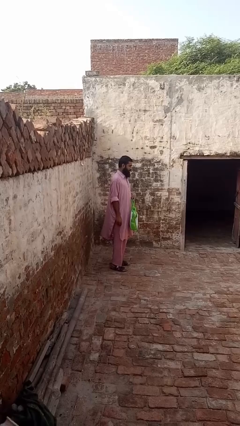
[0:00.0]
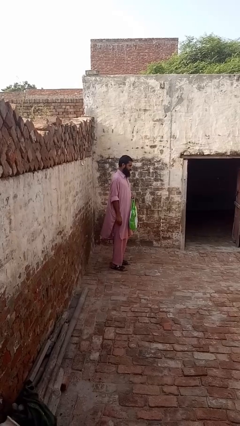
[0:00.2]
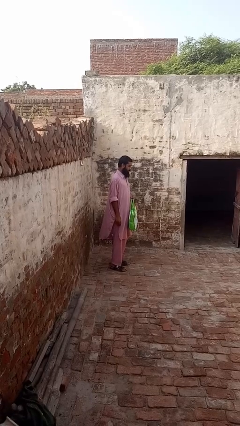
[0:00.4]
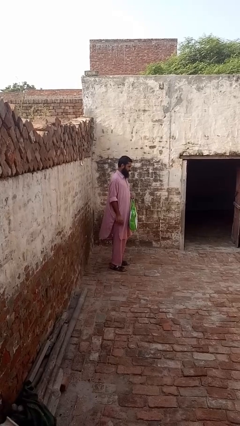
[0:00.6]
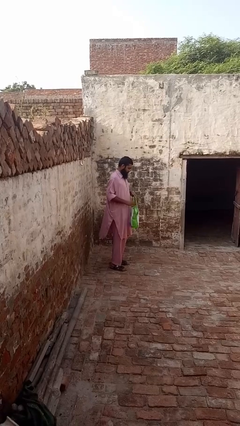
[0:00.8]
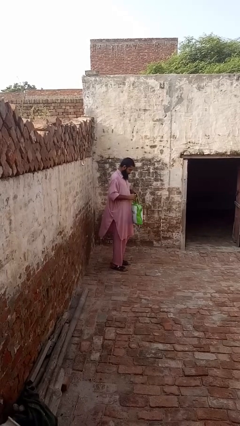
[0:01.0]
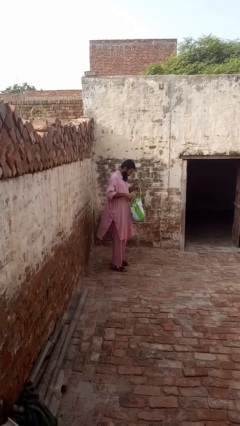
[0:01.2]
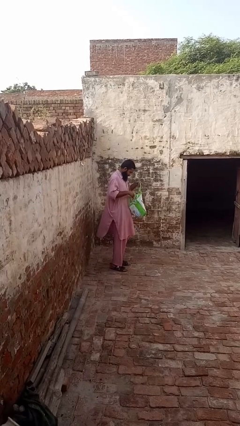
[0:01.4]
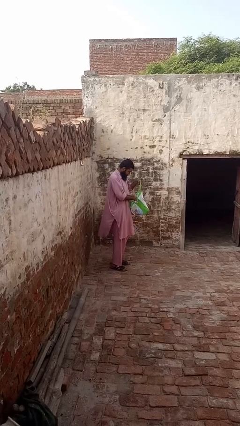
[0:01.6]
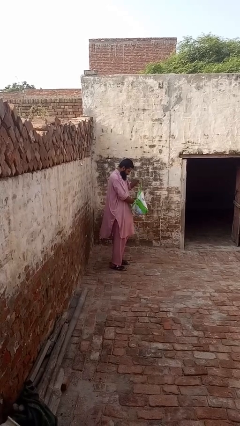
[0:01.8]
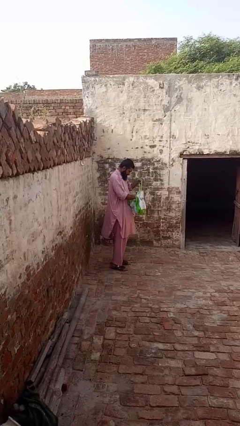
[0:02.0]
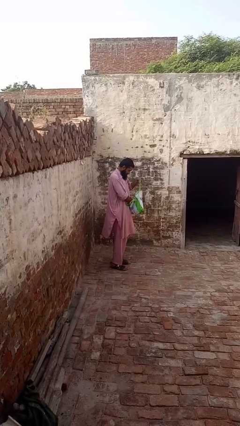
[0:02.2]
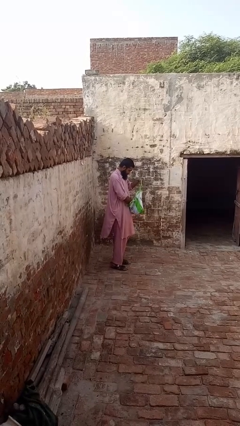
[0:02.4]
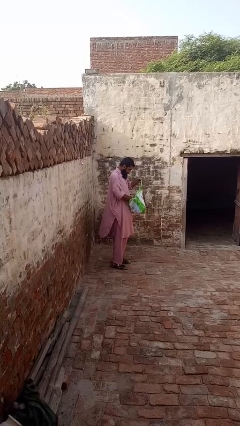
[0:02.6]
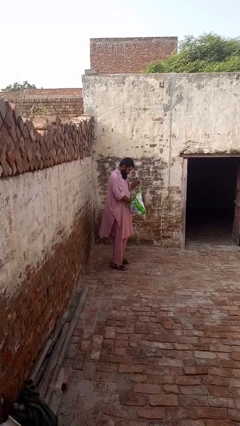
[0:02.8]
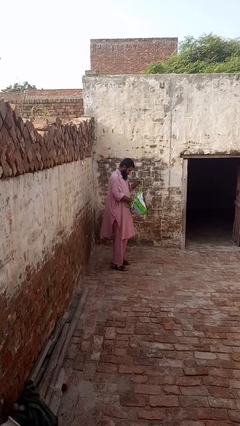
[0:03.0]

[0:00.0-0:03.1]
person searches in bag

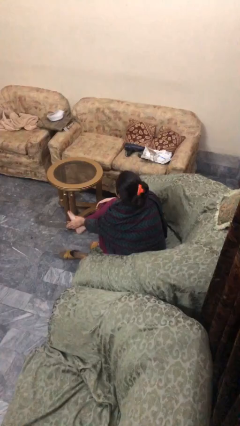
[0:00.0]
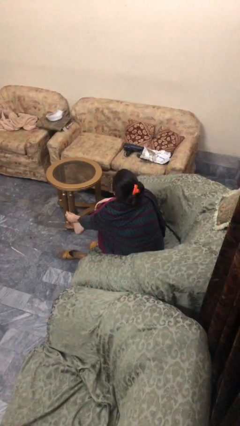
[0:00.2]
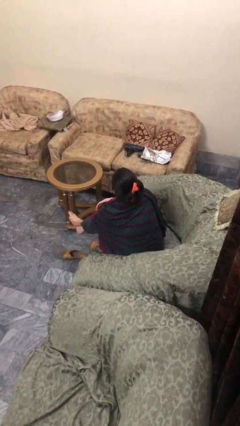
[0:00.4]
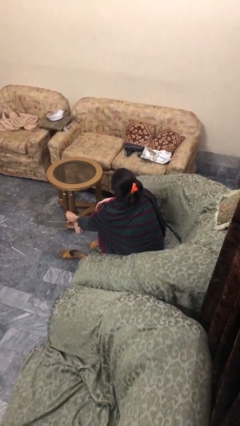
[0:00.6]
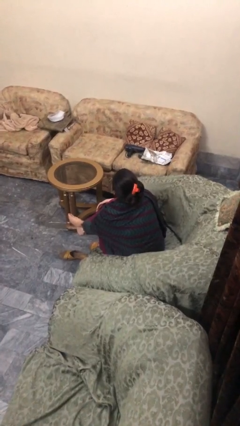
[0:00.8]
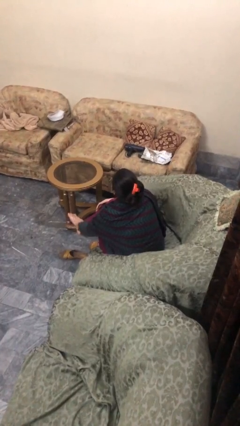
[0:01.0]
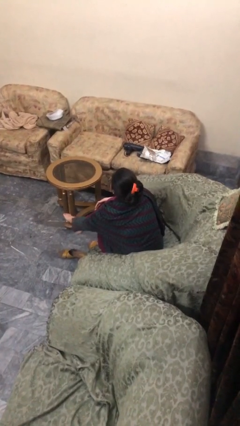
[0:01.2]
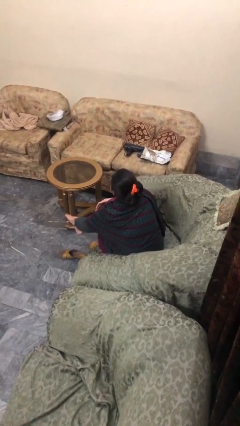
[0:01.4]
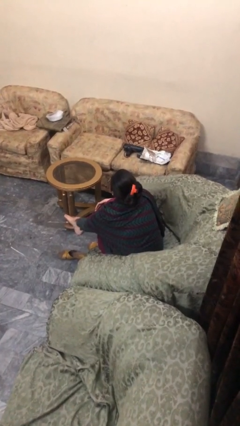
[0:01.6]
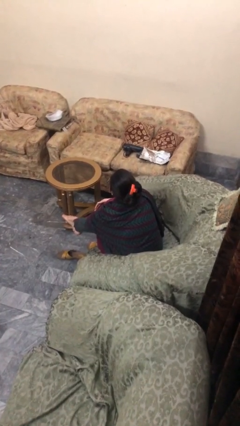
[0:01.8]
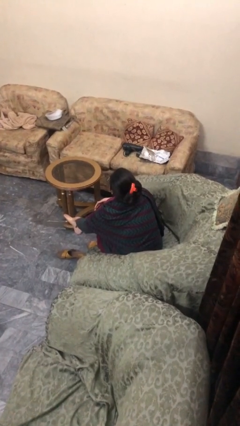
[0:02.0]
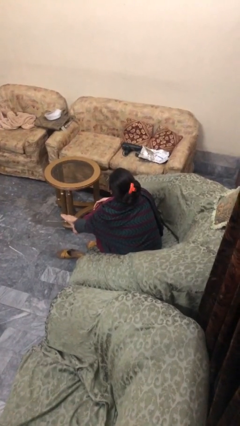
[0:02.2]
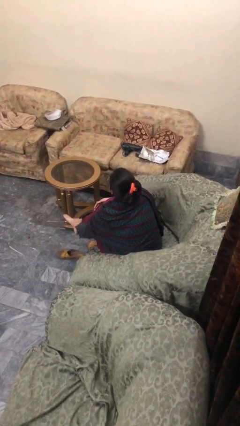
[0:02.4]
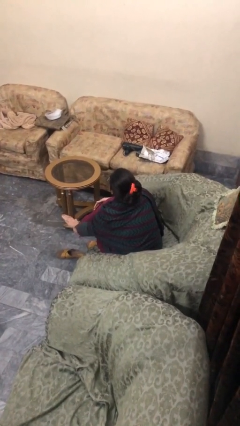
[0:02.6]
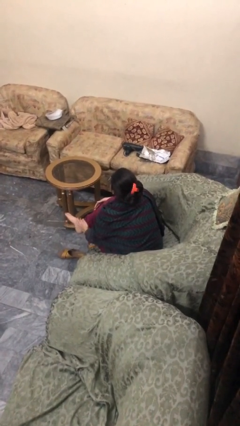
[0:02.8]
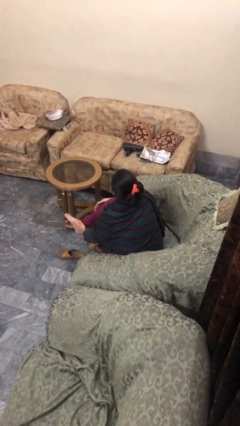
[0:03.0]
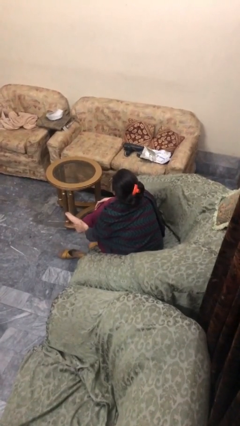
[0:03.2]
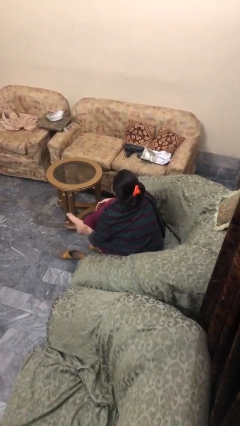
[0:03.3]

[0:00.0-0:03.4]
person rubs foot

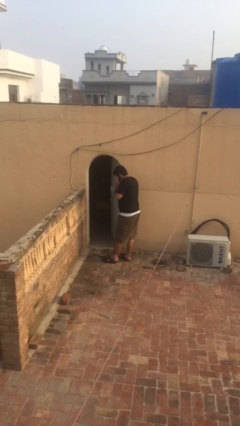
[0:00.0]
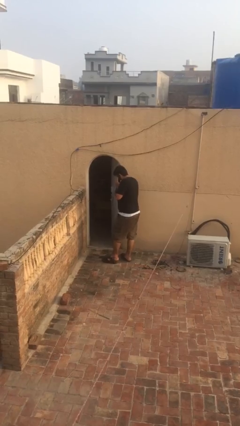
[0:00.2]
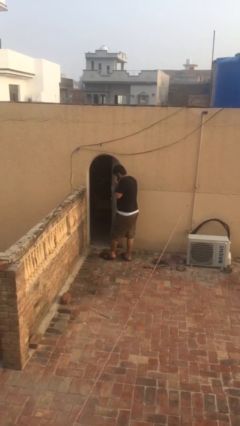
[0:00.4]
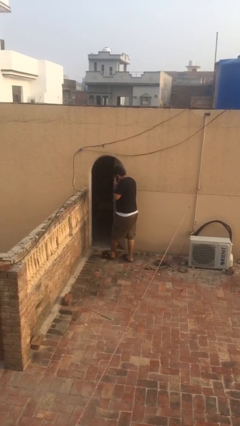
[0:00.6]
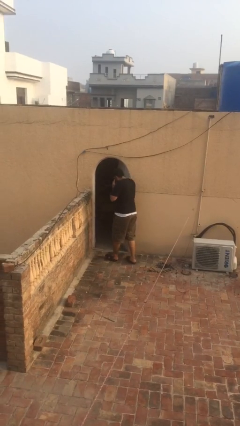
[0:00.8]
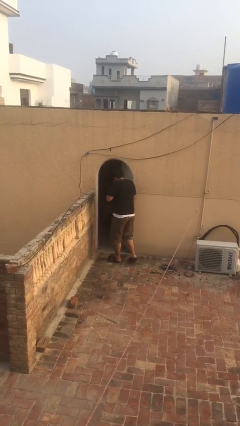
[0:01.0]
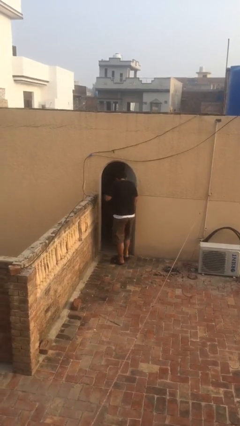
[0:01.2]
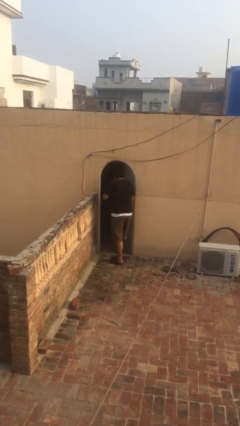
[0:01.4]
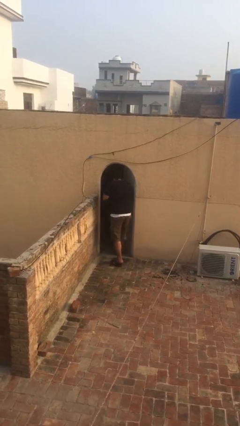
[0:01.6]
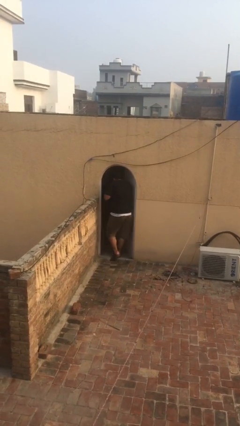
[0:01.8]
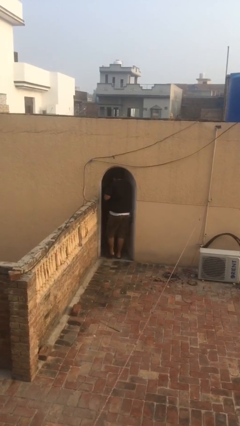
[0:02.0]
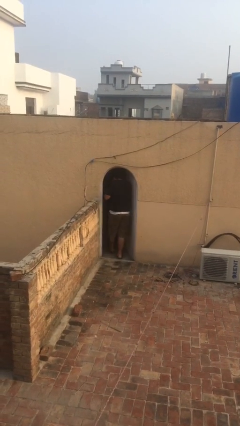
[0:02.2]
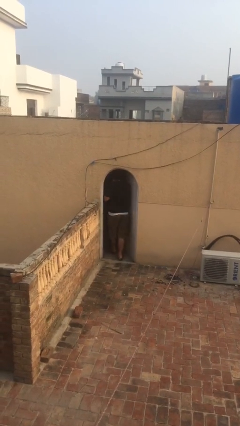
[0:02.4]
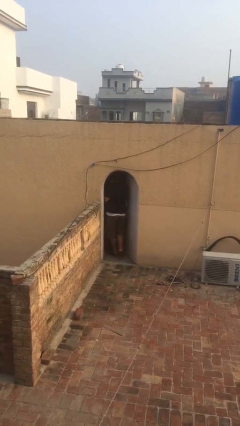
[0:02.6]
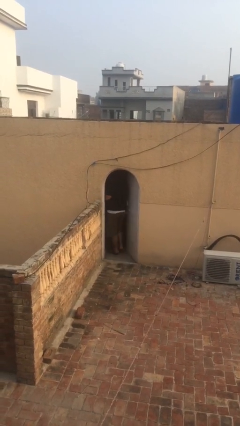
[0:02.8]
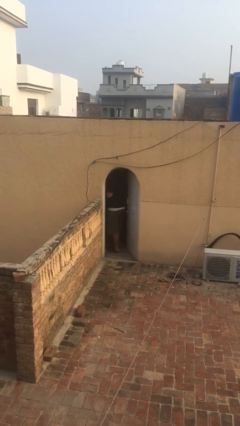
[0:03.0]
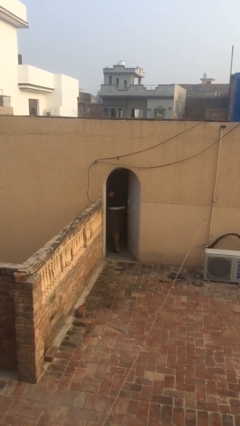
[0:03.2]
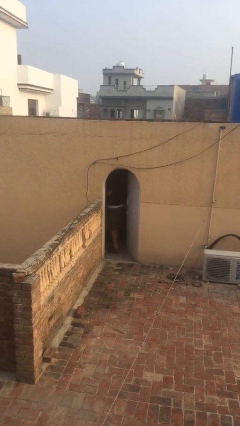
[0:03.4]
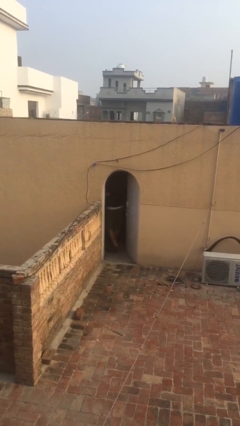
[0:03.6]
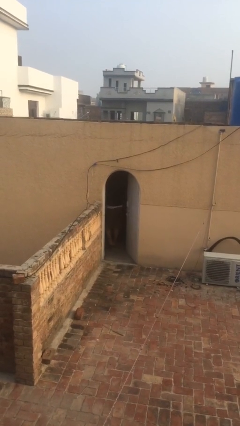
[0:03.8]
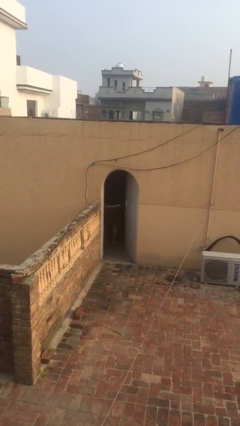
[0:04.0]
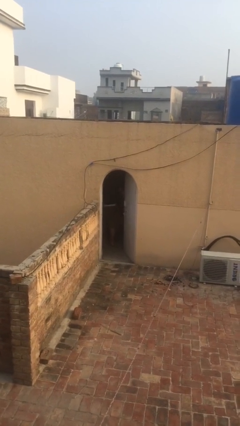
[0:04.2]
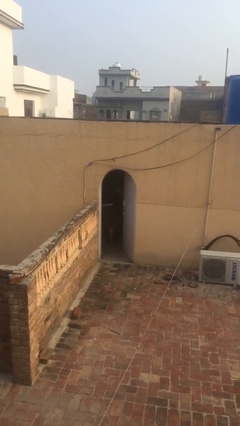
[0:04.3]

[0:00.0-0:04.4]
person exits scene through structure

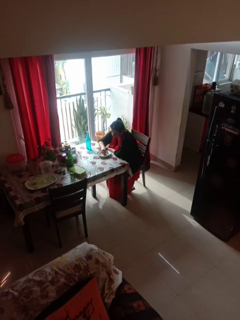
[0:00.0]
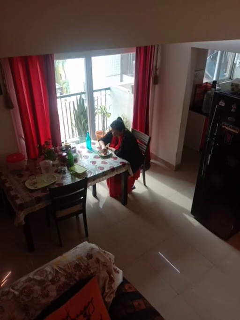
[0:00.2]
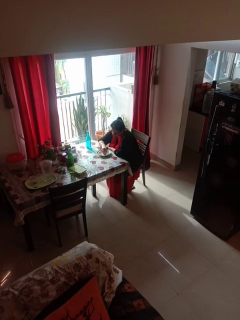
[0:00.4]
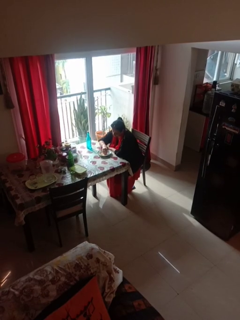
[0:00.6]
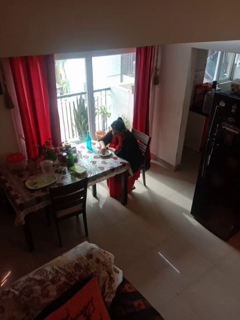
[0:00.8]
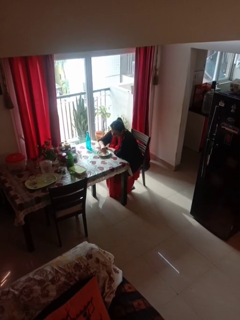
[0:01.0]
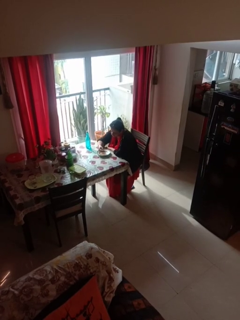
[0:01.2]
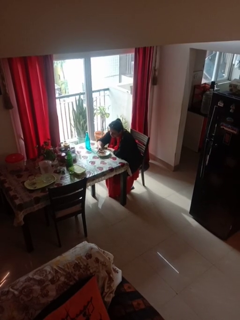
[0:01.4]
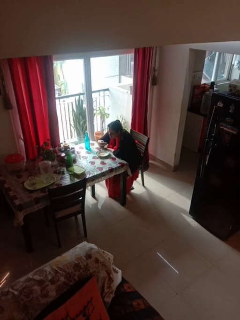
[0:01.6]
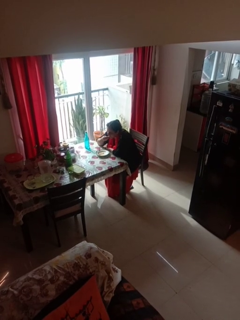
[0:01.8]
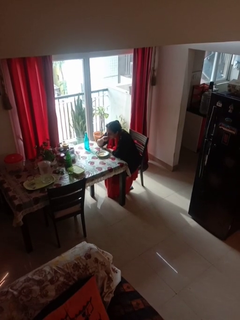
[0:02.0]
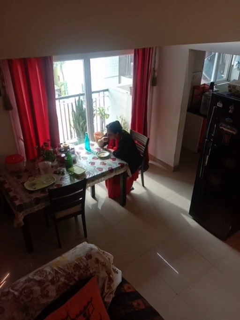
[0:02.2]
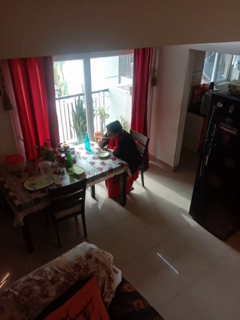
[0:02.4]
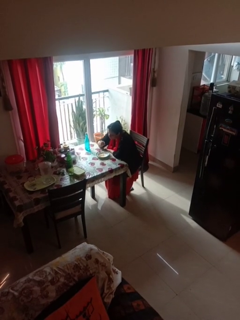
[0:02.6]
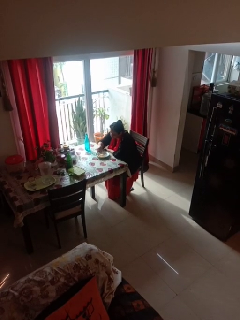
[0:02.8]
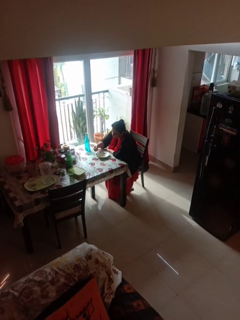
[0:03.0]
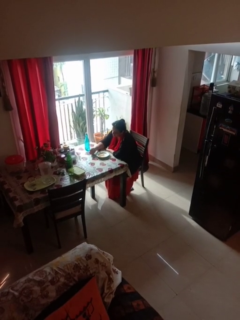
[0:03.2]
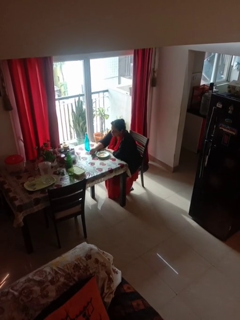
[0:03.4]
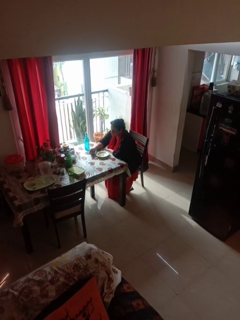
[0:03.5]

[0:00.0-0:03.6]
person eats with hands

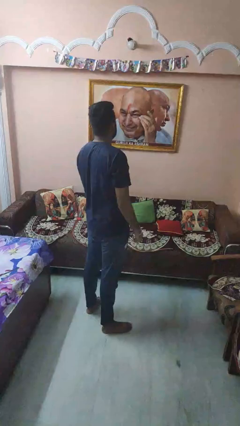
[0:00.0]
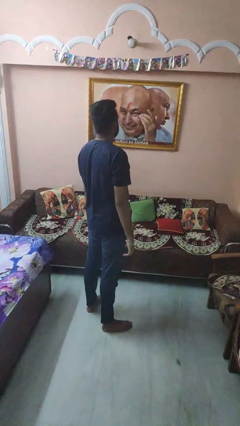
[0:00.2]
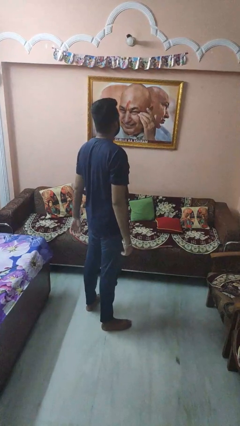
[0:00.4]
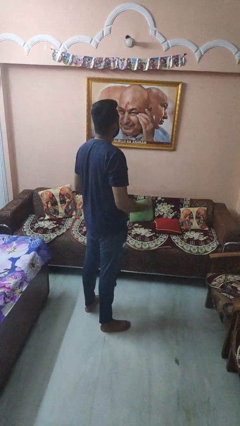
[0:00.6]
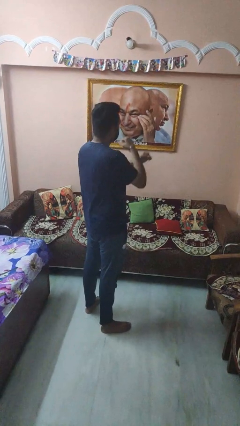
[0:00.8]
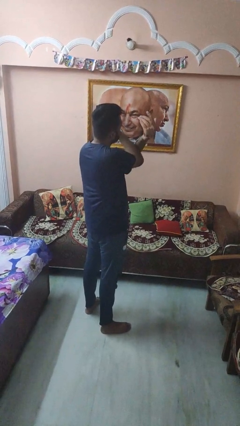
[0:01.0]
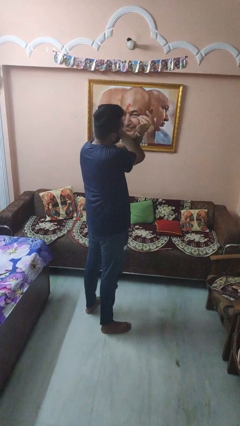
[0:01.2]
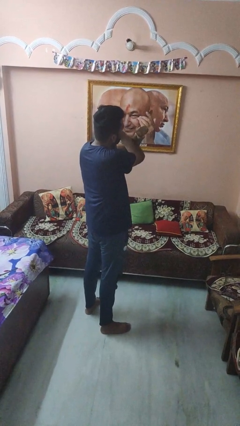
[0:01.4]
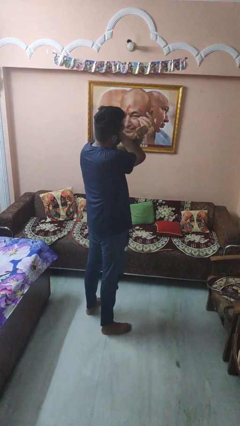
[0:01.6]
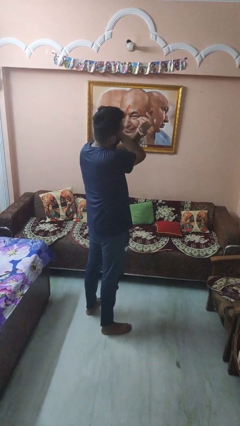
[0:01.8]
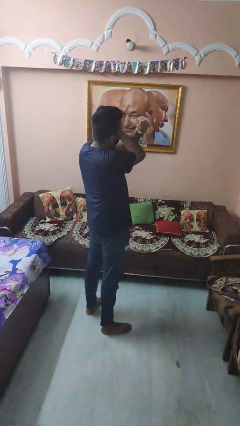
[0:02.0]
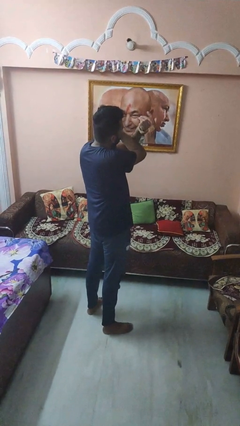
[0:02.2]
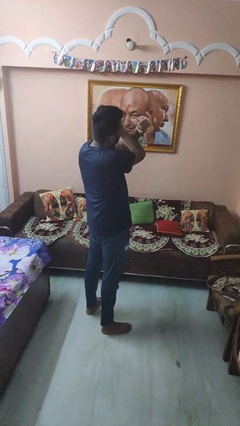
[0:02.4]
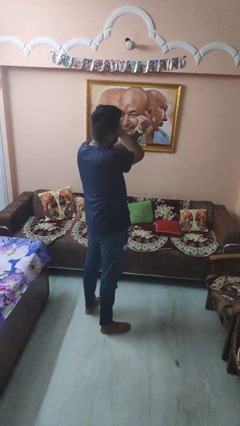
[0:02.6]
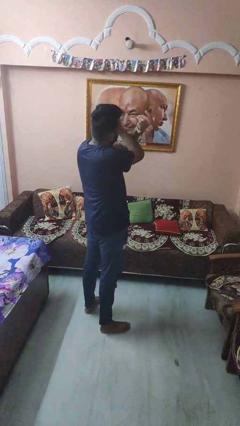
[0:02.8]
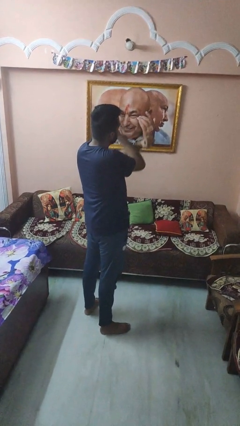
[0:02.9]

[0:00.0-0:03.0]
person gestures arms x

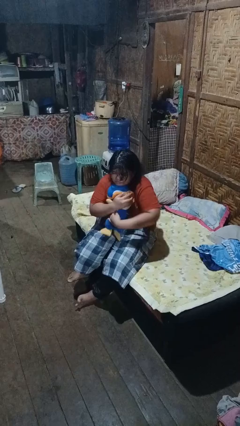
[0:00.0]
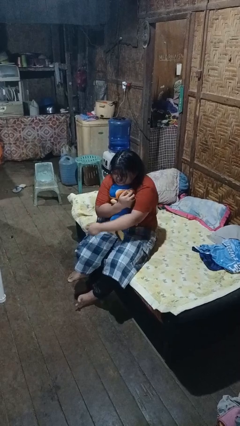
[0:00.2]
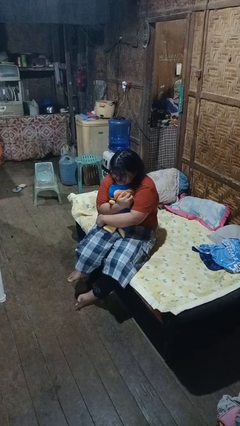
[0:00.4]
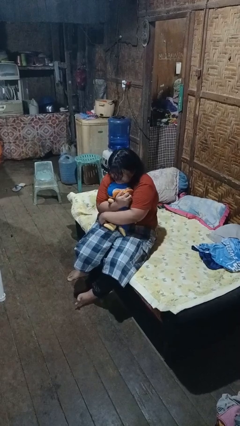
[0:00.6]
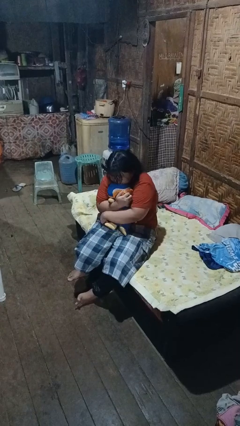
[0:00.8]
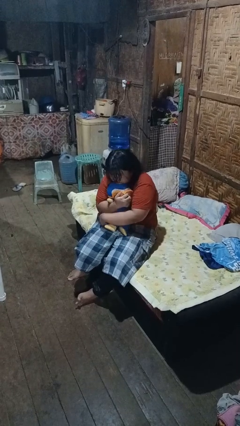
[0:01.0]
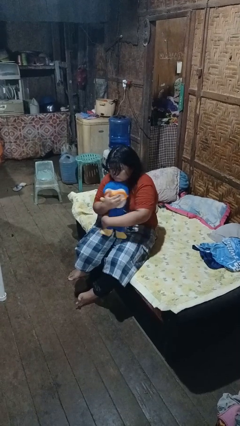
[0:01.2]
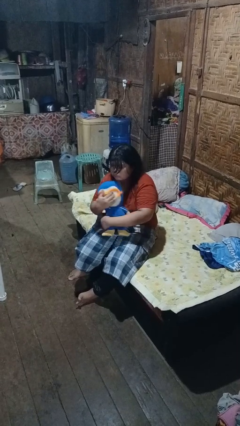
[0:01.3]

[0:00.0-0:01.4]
person hugs stuffed animal
